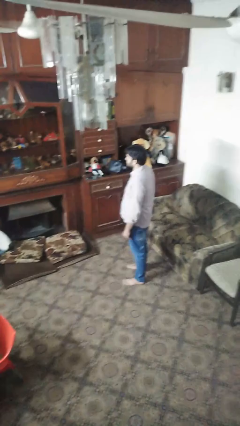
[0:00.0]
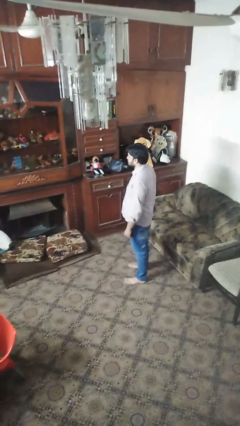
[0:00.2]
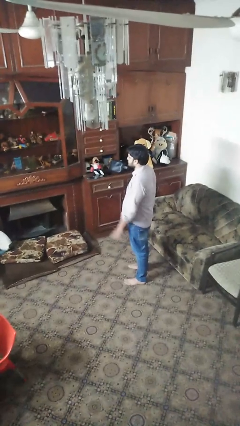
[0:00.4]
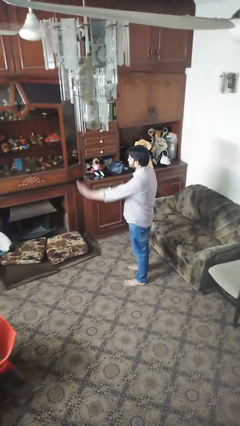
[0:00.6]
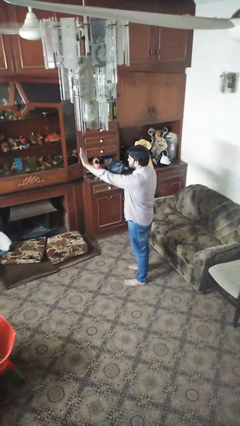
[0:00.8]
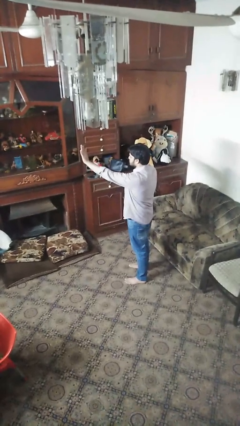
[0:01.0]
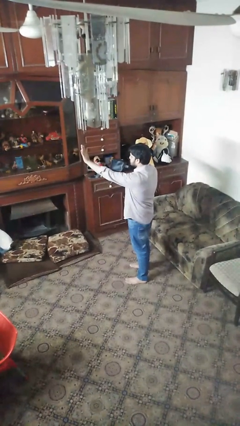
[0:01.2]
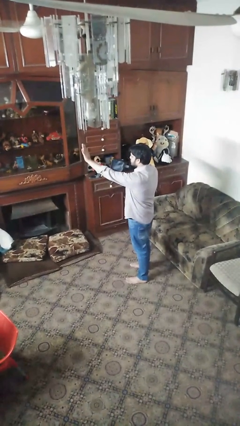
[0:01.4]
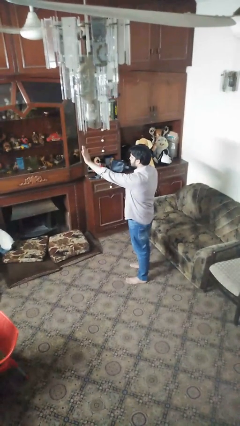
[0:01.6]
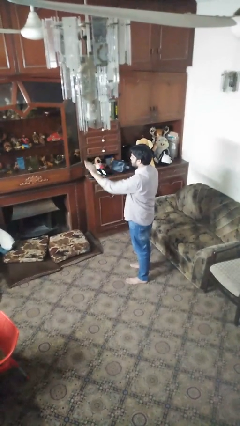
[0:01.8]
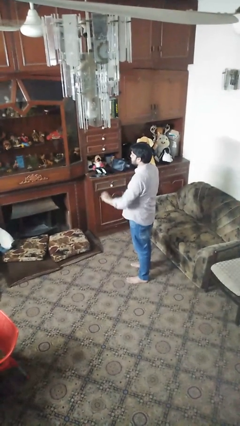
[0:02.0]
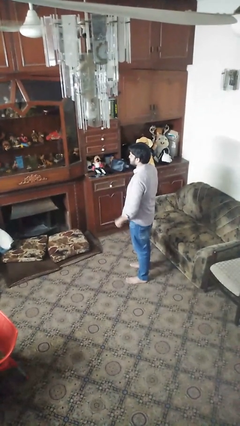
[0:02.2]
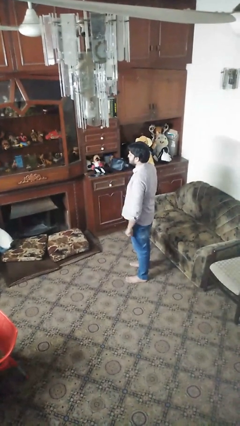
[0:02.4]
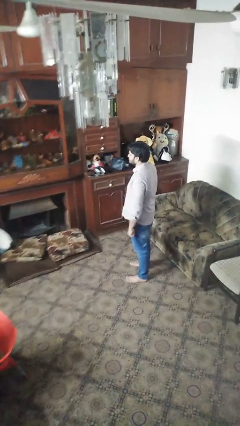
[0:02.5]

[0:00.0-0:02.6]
person gestures stop

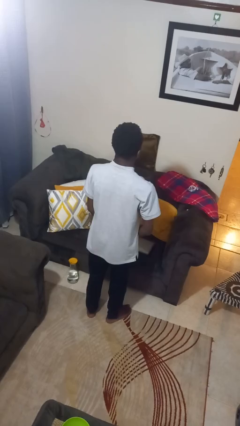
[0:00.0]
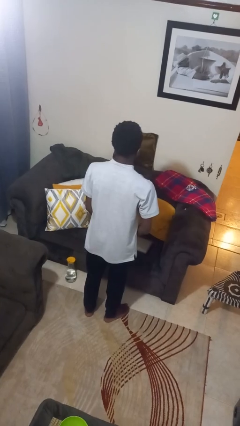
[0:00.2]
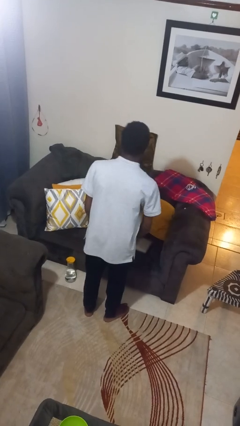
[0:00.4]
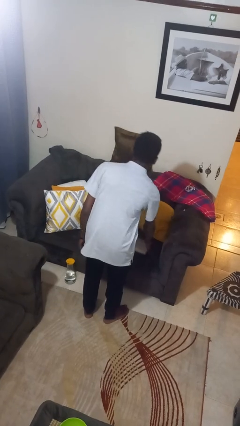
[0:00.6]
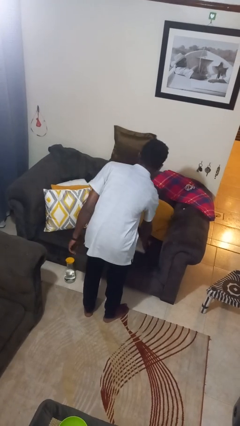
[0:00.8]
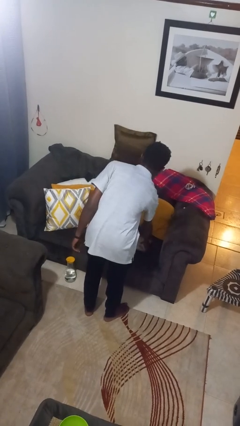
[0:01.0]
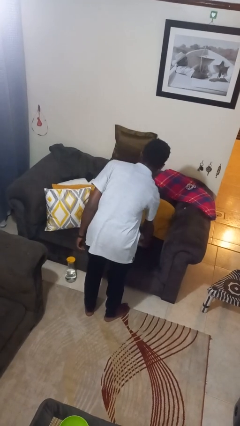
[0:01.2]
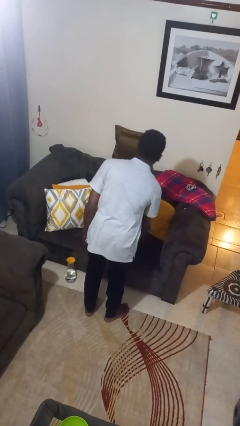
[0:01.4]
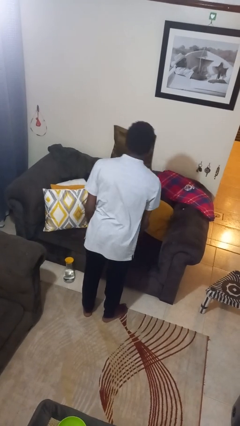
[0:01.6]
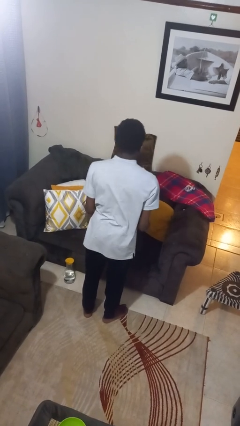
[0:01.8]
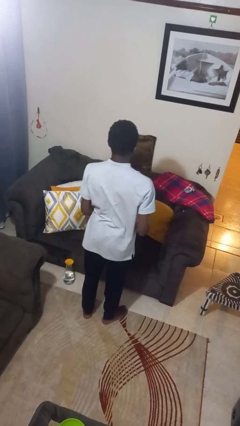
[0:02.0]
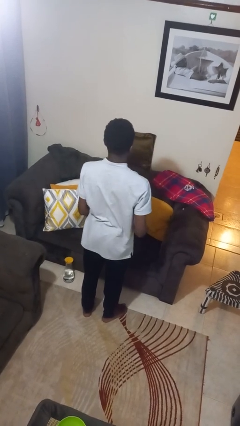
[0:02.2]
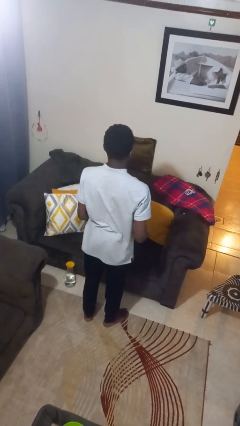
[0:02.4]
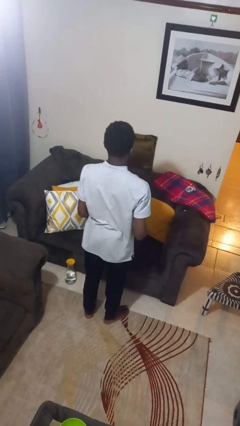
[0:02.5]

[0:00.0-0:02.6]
person picks up object from couch

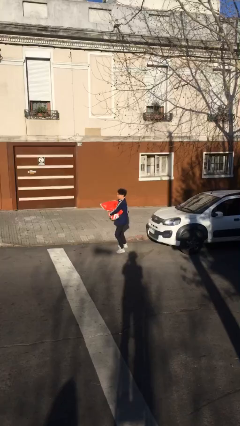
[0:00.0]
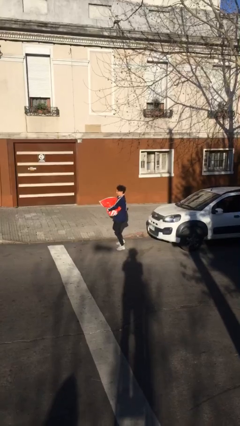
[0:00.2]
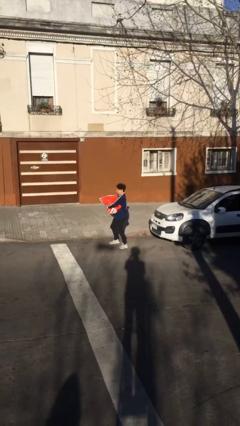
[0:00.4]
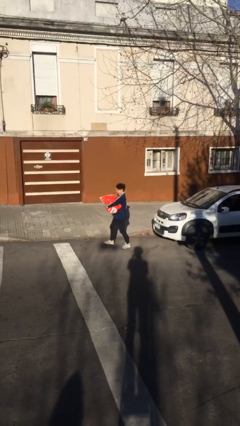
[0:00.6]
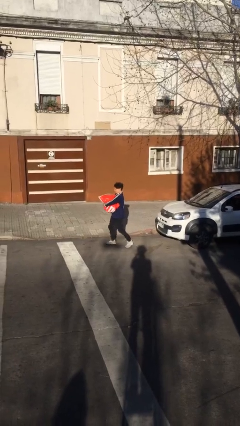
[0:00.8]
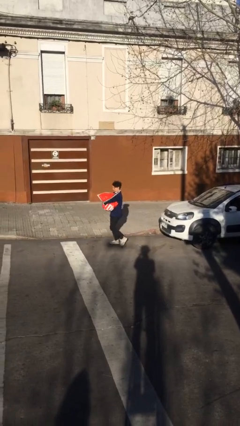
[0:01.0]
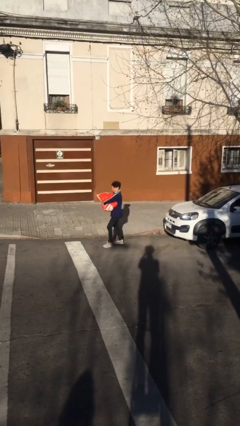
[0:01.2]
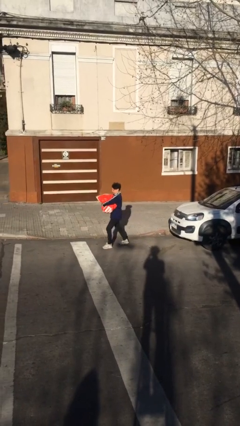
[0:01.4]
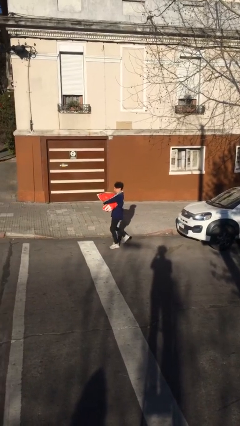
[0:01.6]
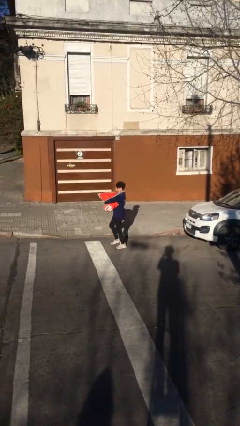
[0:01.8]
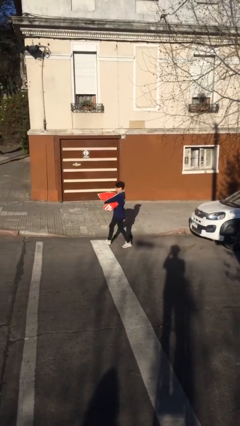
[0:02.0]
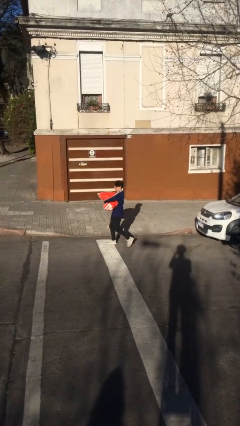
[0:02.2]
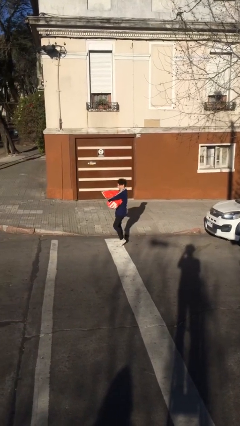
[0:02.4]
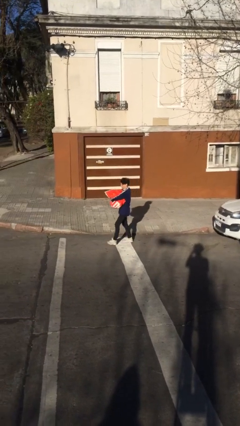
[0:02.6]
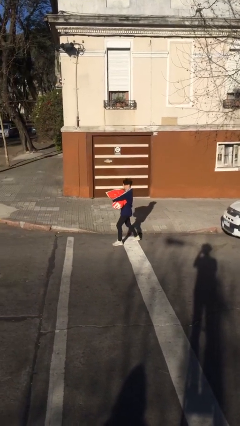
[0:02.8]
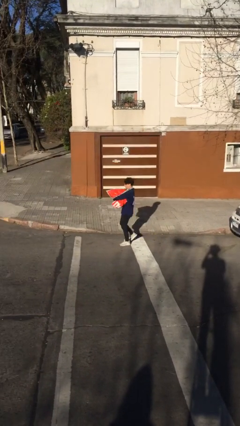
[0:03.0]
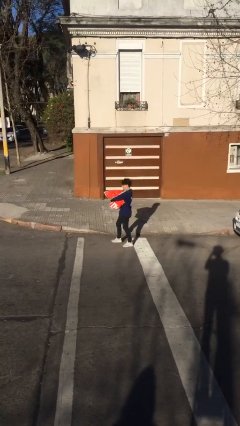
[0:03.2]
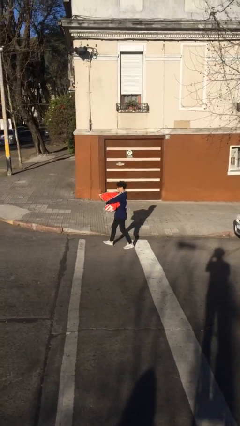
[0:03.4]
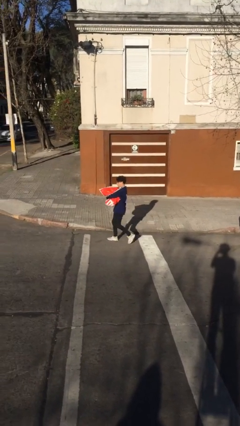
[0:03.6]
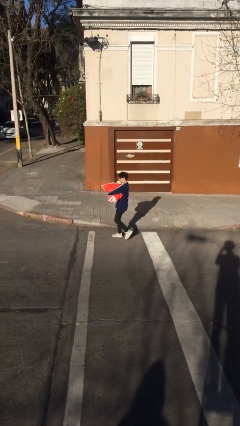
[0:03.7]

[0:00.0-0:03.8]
person carries heavy object

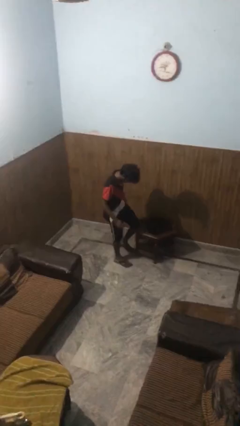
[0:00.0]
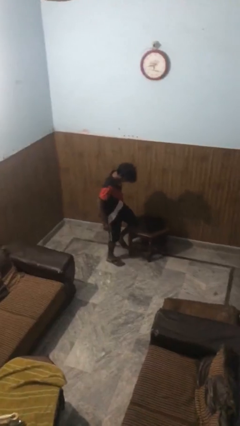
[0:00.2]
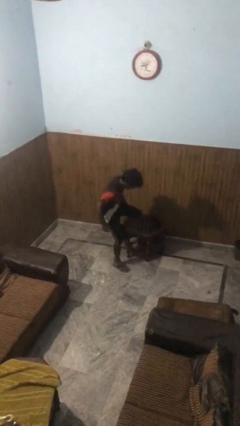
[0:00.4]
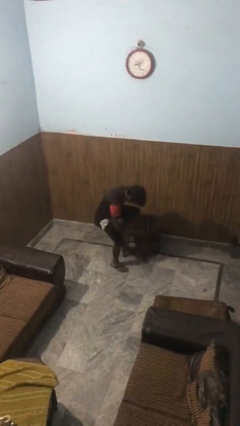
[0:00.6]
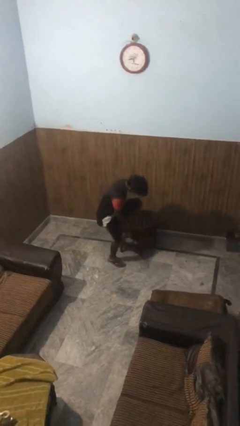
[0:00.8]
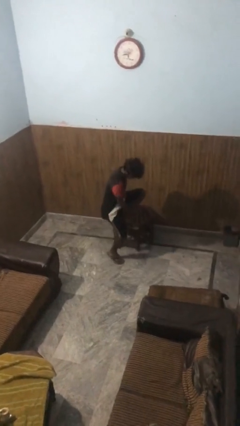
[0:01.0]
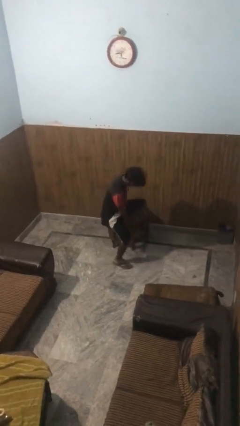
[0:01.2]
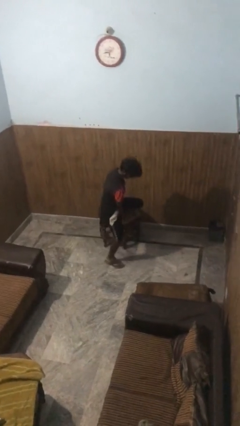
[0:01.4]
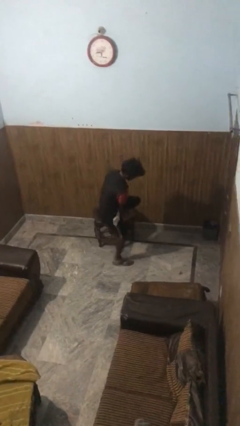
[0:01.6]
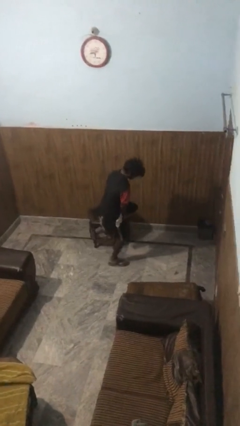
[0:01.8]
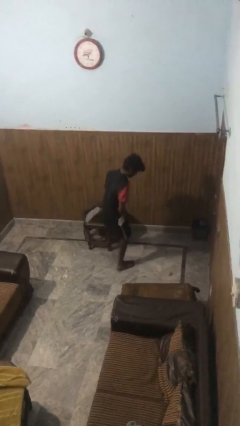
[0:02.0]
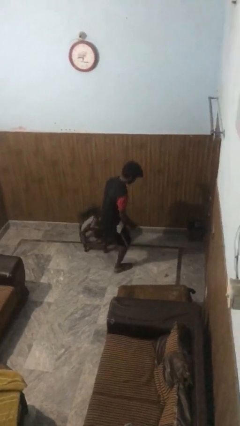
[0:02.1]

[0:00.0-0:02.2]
person bumps into table

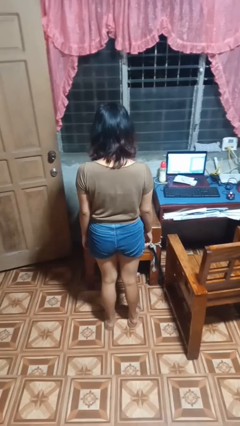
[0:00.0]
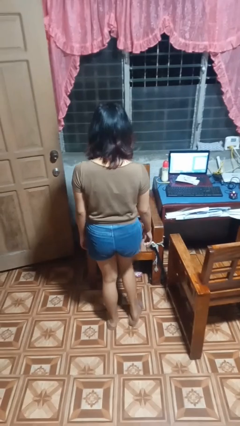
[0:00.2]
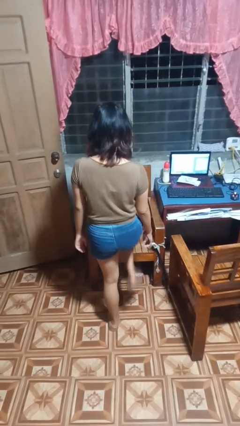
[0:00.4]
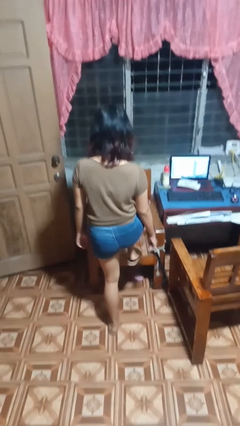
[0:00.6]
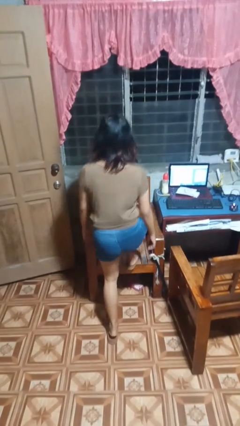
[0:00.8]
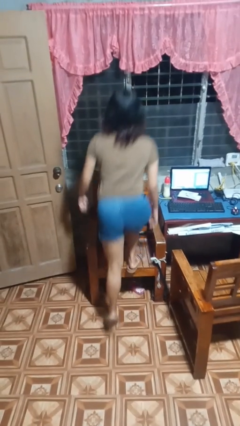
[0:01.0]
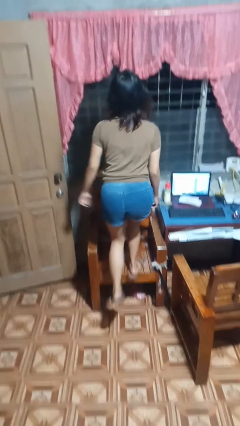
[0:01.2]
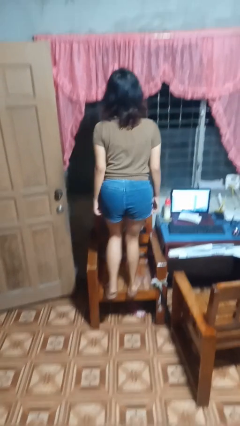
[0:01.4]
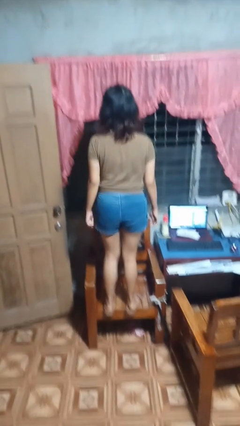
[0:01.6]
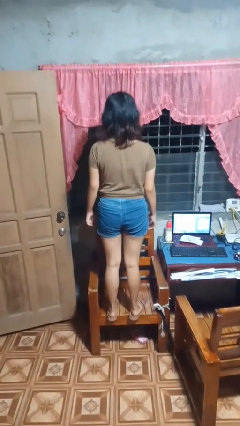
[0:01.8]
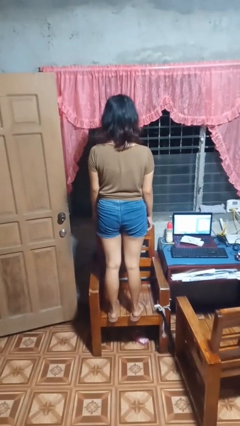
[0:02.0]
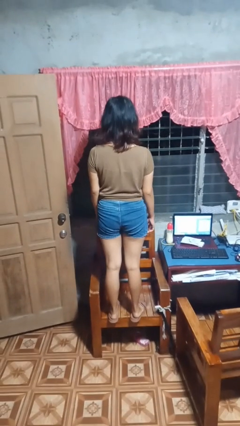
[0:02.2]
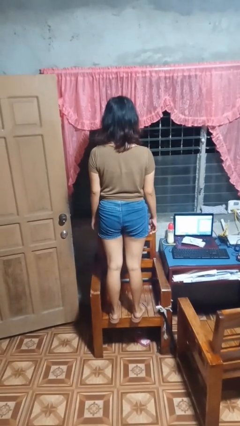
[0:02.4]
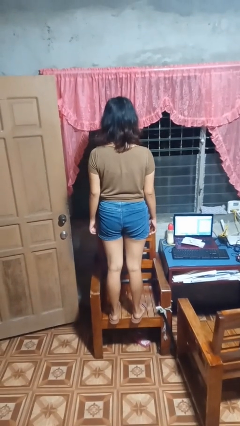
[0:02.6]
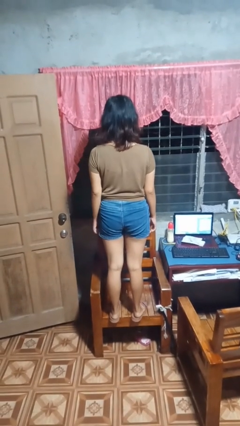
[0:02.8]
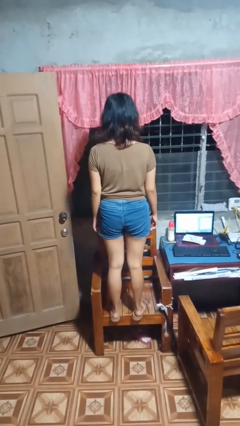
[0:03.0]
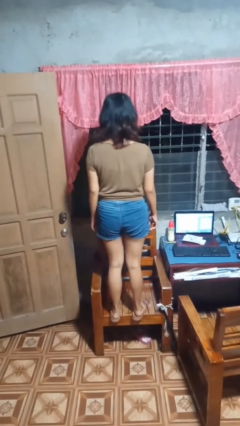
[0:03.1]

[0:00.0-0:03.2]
person climbs on chair

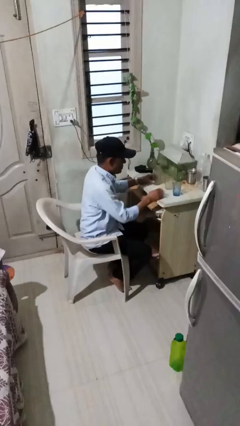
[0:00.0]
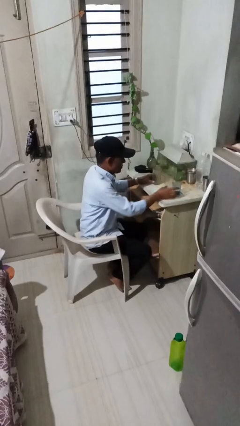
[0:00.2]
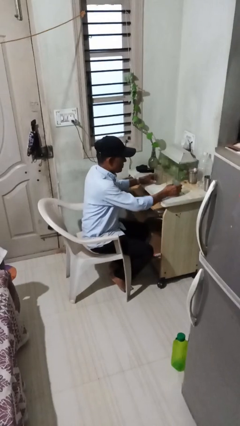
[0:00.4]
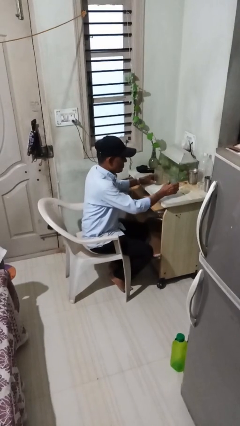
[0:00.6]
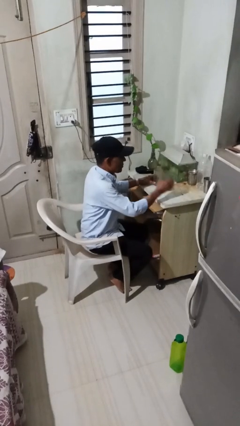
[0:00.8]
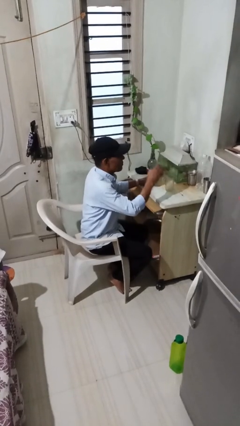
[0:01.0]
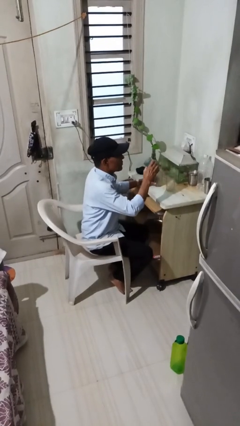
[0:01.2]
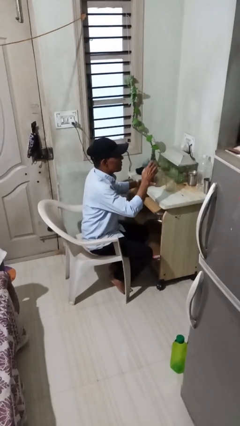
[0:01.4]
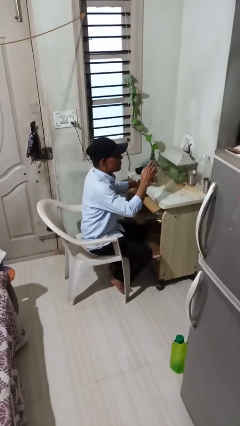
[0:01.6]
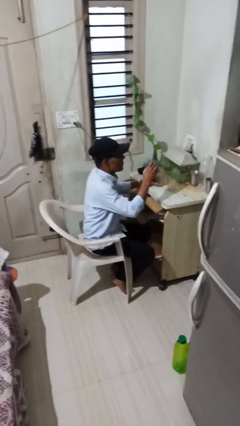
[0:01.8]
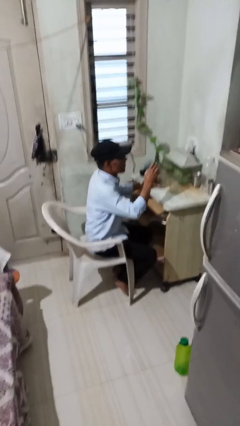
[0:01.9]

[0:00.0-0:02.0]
person picks up object from table

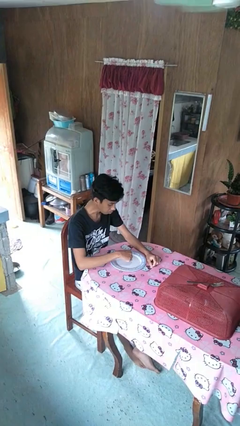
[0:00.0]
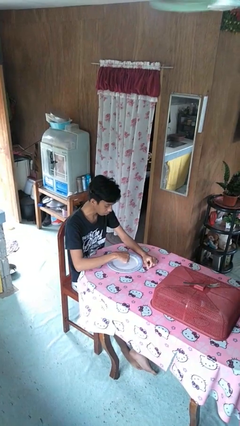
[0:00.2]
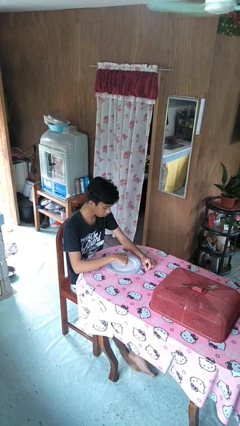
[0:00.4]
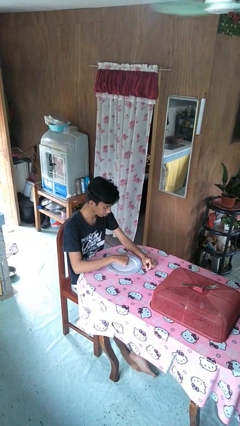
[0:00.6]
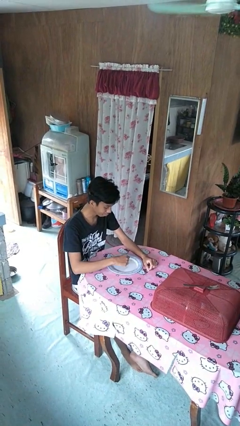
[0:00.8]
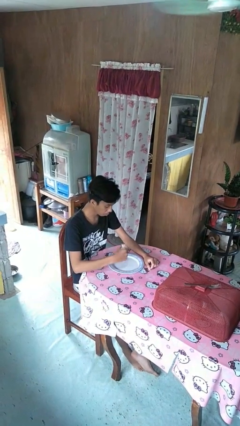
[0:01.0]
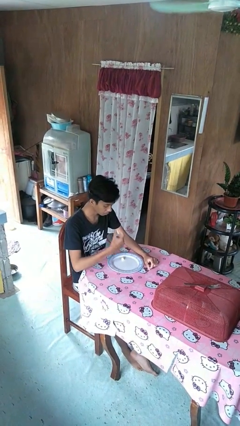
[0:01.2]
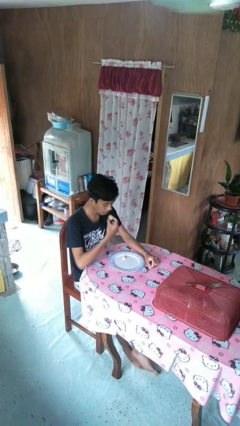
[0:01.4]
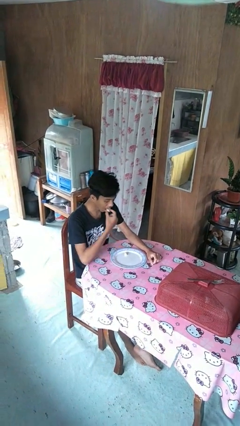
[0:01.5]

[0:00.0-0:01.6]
person eats with hands
